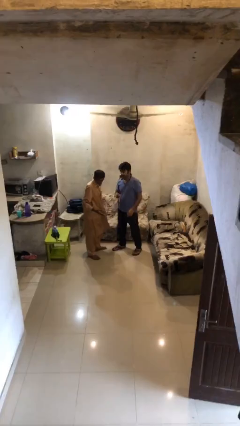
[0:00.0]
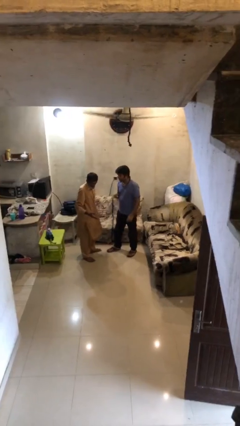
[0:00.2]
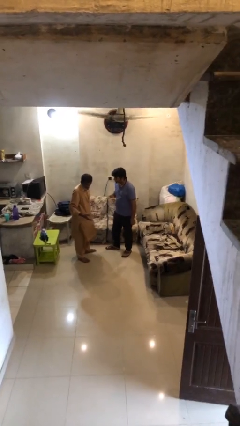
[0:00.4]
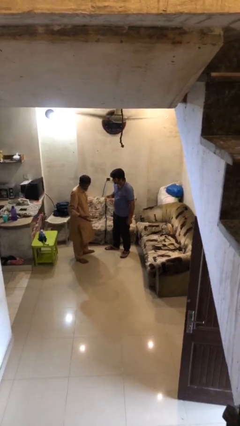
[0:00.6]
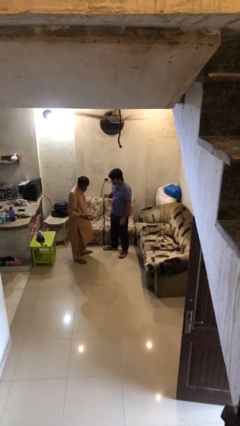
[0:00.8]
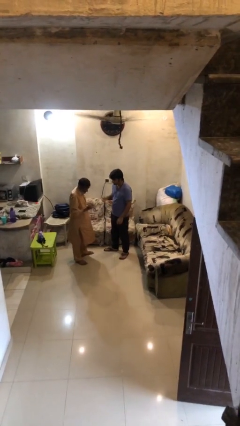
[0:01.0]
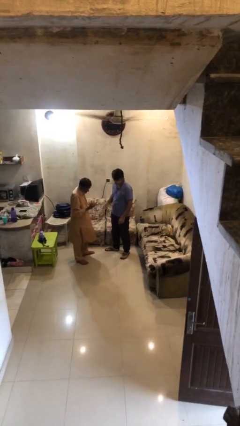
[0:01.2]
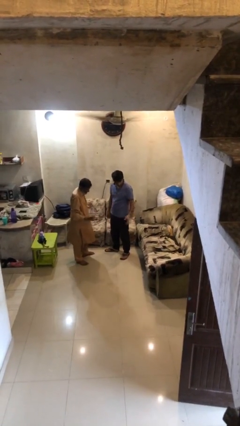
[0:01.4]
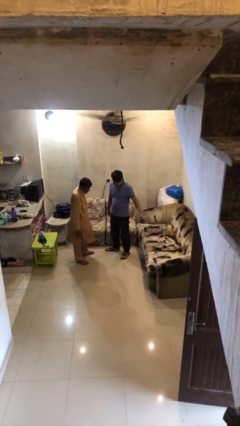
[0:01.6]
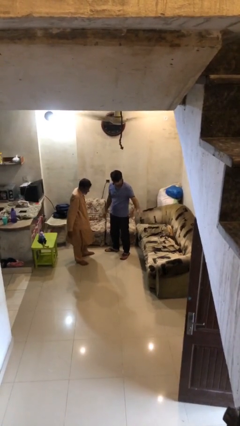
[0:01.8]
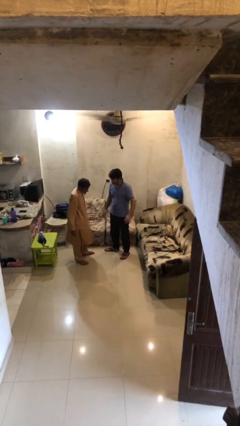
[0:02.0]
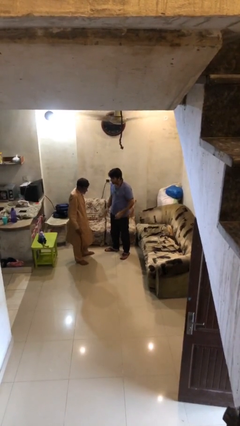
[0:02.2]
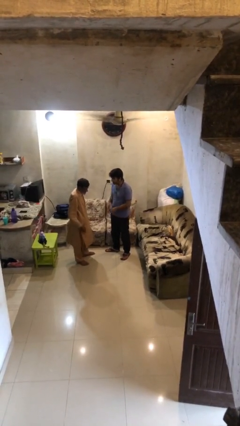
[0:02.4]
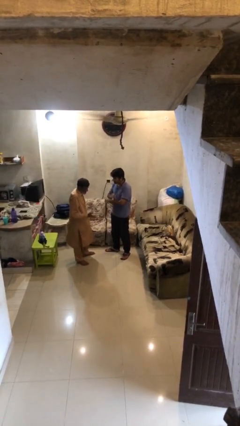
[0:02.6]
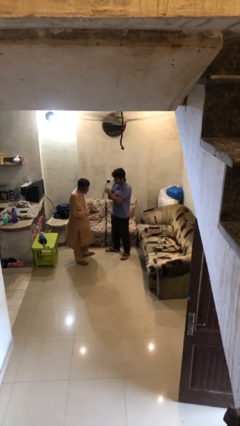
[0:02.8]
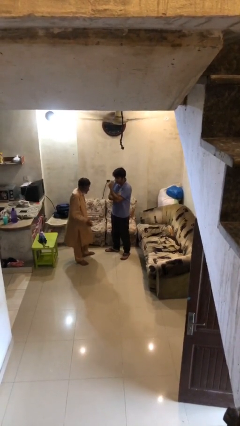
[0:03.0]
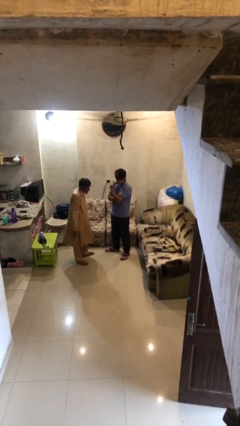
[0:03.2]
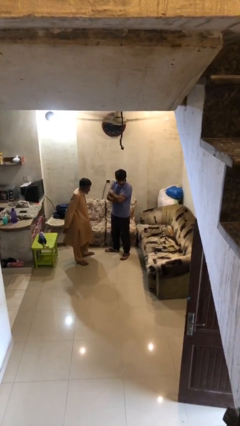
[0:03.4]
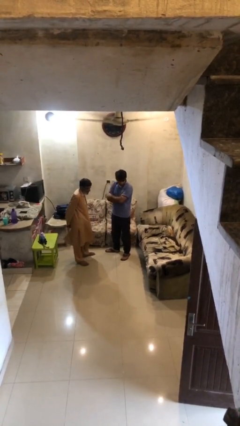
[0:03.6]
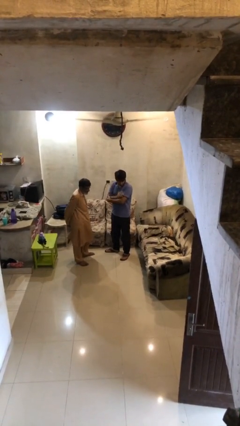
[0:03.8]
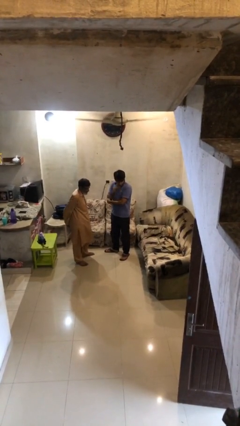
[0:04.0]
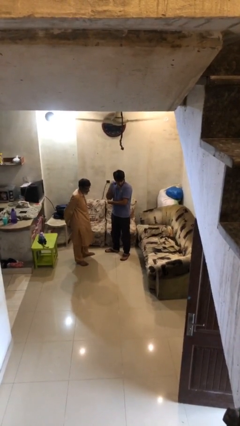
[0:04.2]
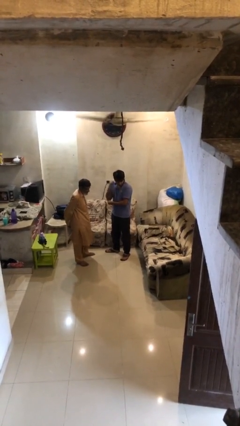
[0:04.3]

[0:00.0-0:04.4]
person talks to person

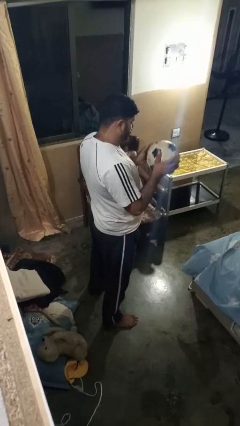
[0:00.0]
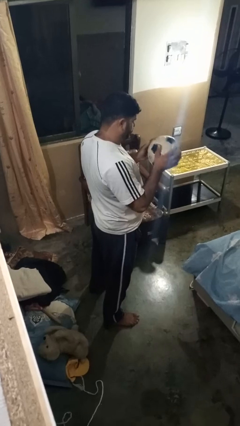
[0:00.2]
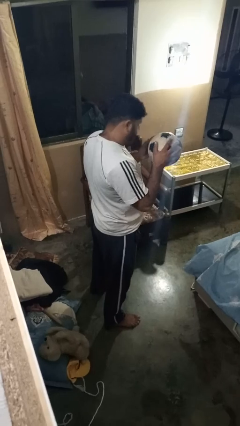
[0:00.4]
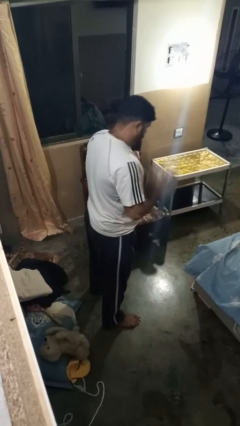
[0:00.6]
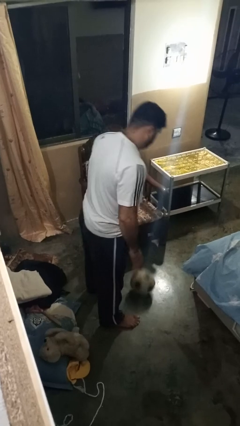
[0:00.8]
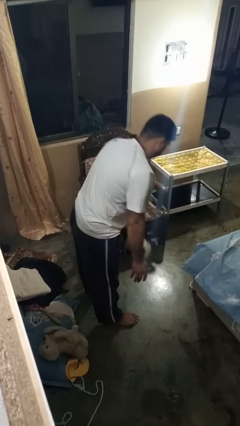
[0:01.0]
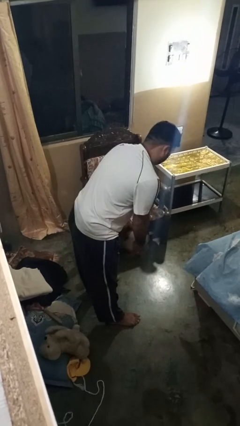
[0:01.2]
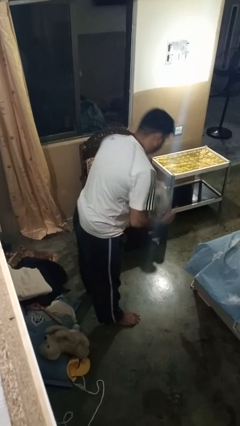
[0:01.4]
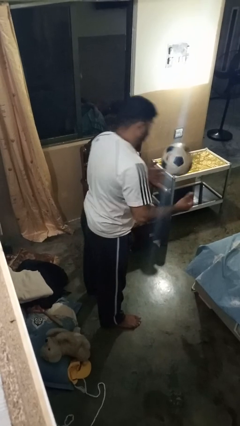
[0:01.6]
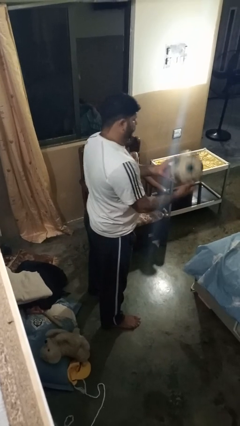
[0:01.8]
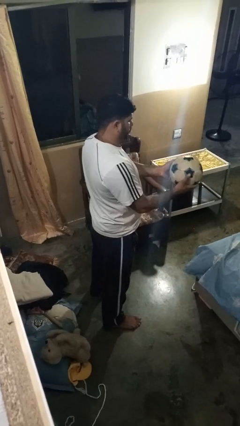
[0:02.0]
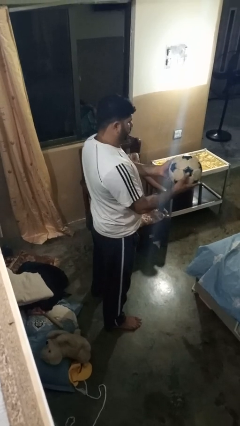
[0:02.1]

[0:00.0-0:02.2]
person bounces ball on floor

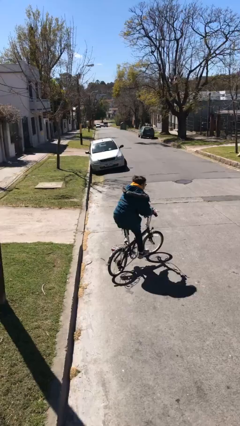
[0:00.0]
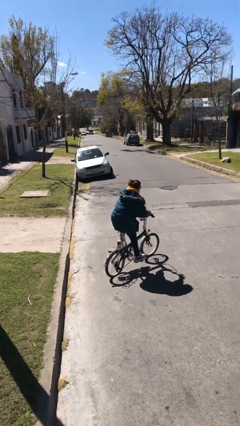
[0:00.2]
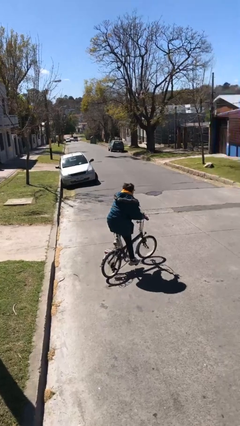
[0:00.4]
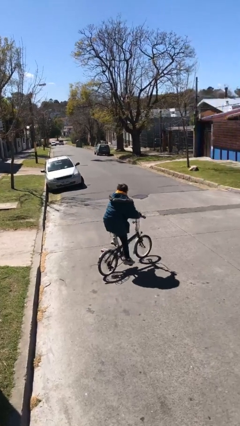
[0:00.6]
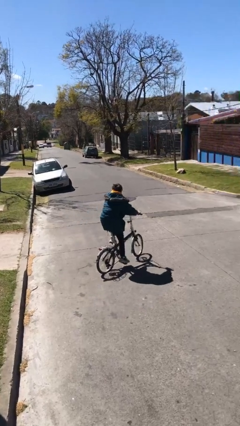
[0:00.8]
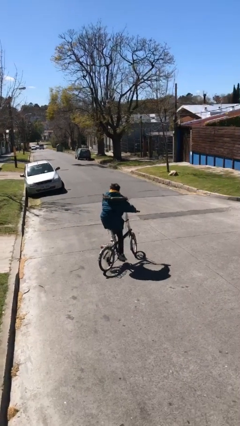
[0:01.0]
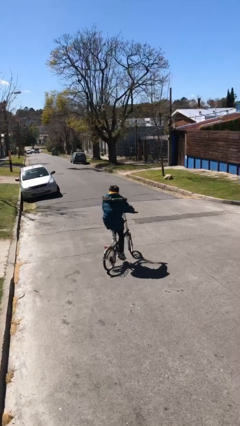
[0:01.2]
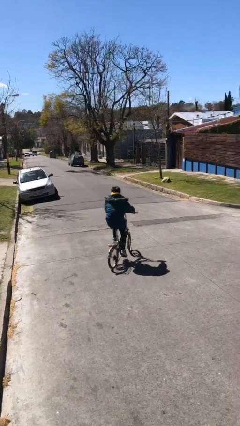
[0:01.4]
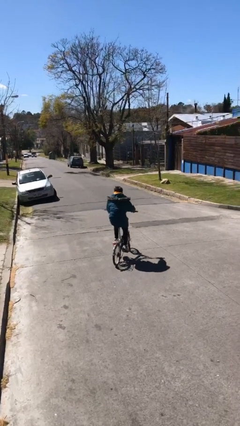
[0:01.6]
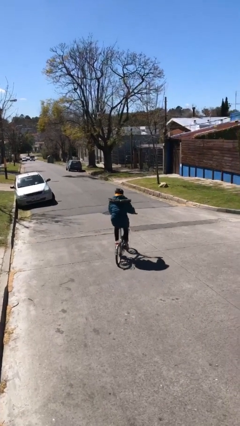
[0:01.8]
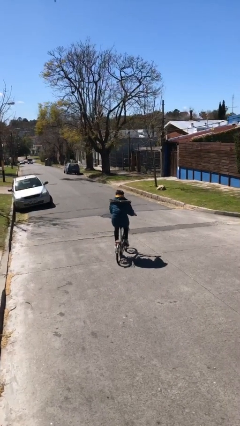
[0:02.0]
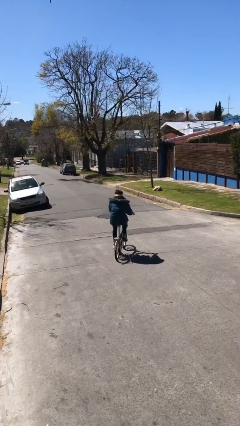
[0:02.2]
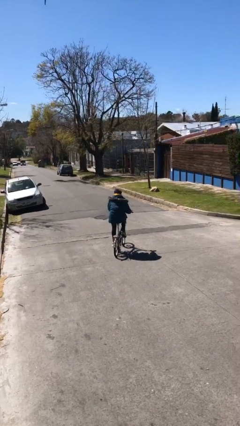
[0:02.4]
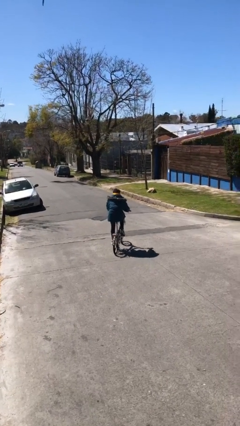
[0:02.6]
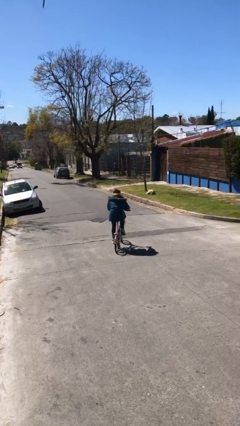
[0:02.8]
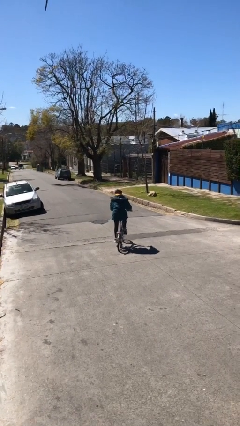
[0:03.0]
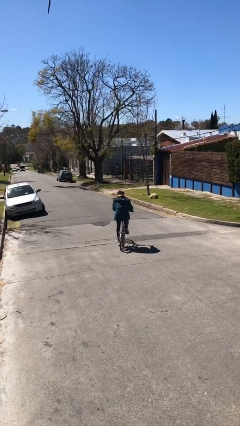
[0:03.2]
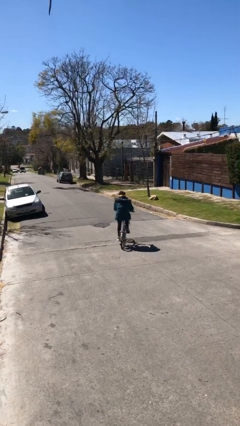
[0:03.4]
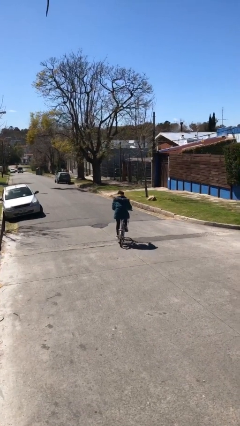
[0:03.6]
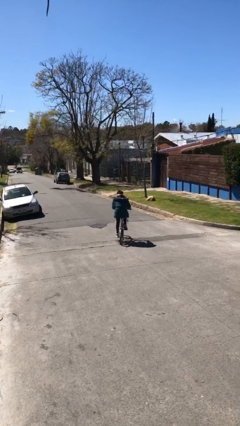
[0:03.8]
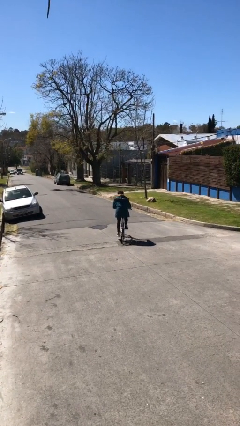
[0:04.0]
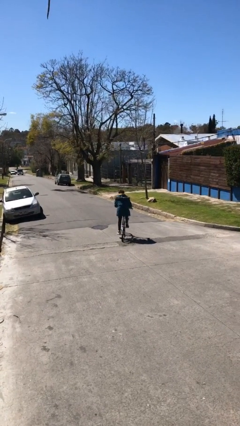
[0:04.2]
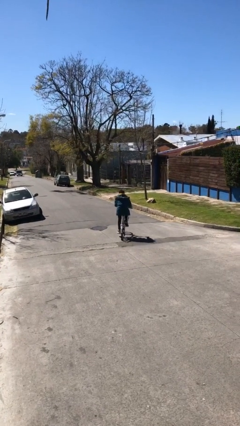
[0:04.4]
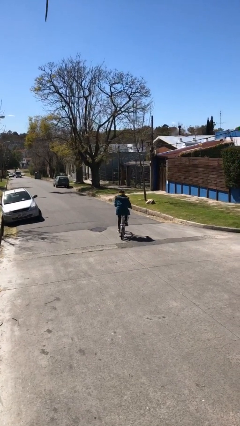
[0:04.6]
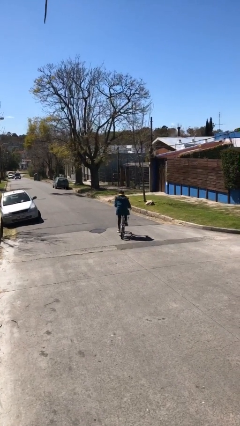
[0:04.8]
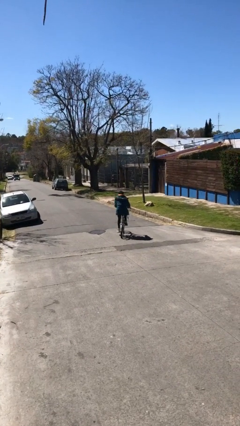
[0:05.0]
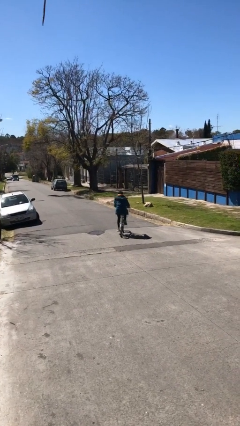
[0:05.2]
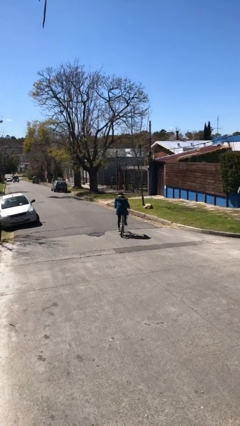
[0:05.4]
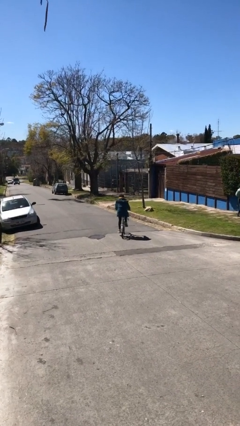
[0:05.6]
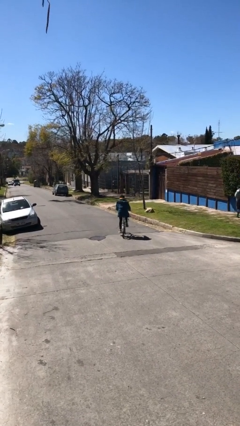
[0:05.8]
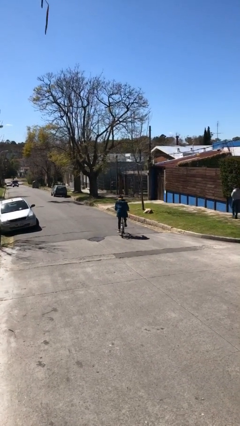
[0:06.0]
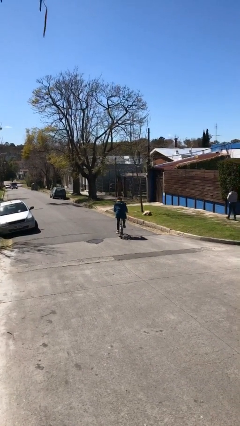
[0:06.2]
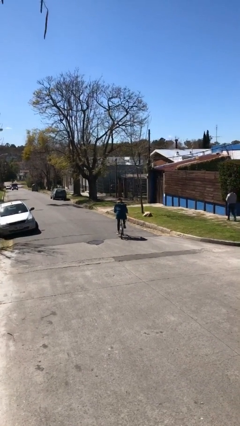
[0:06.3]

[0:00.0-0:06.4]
person rides bicycle

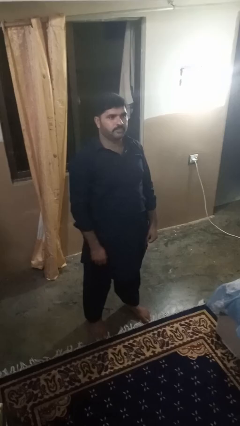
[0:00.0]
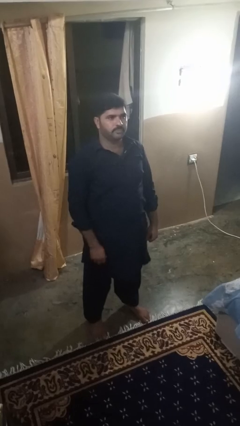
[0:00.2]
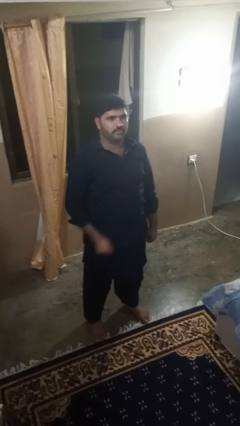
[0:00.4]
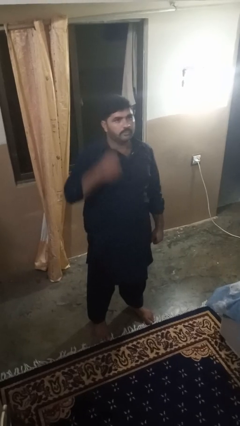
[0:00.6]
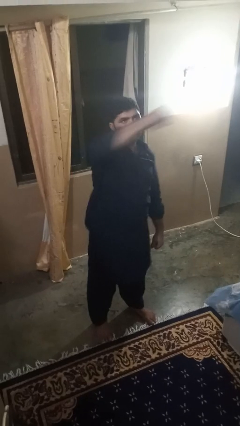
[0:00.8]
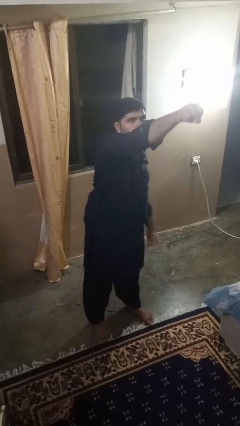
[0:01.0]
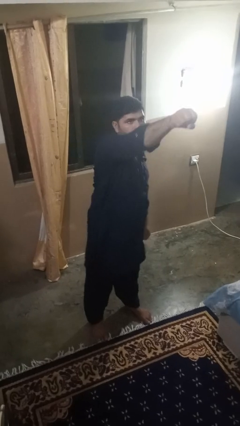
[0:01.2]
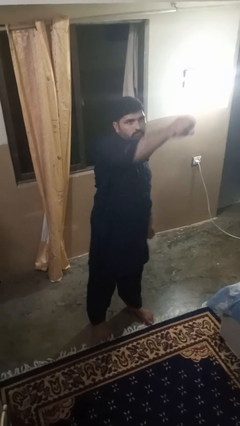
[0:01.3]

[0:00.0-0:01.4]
person punches

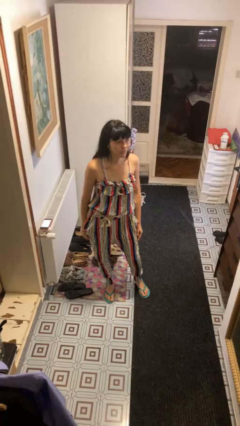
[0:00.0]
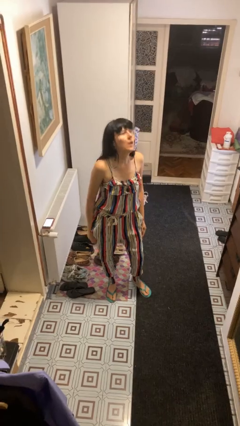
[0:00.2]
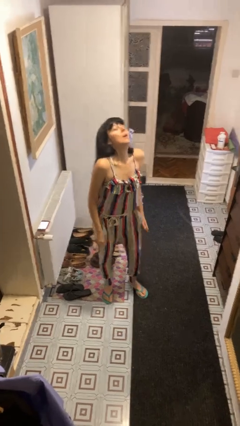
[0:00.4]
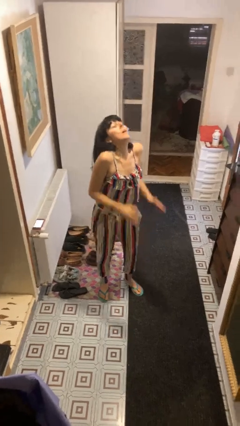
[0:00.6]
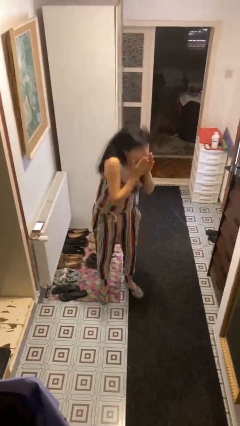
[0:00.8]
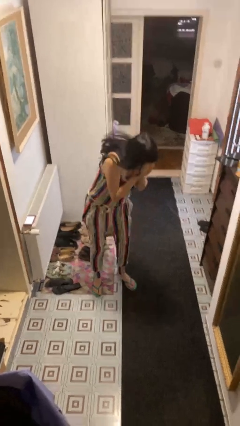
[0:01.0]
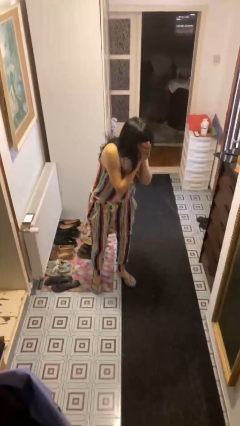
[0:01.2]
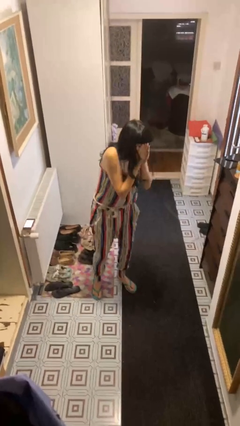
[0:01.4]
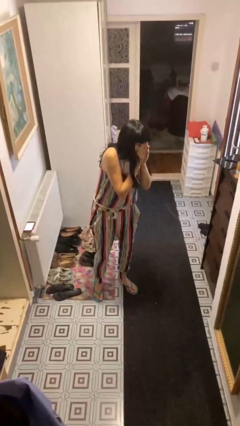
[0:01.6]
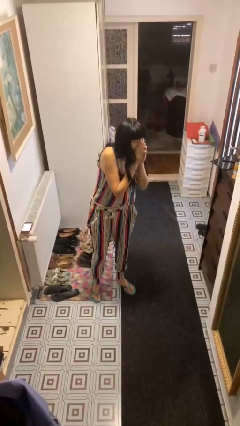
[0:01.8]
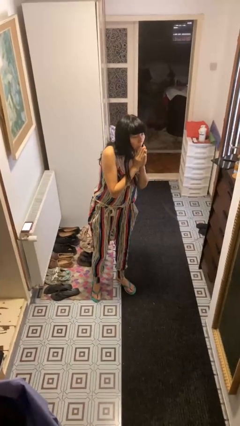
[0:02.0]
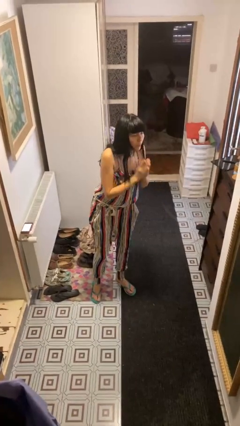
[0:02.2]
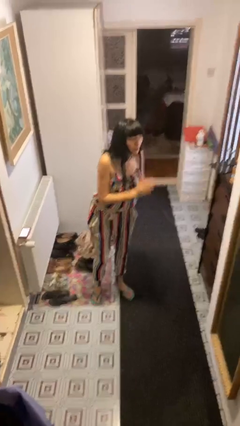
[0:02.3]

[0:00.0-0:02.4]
person sneezes into hand

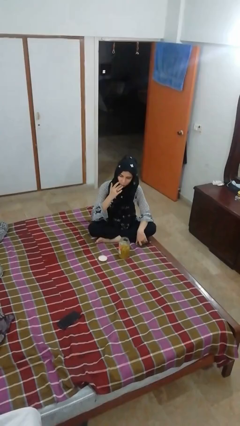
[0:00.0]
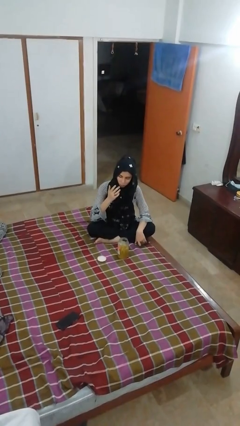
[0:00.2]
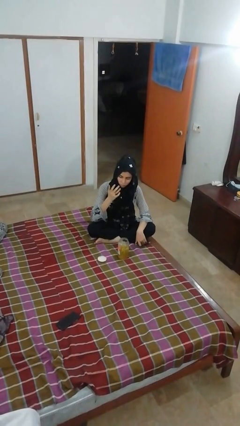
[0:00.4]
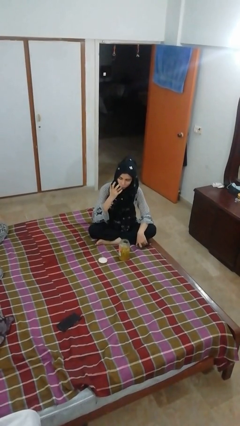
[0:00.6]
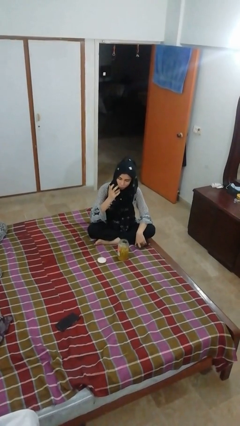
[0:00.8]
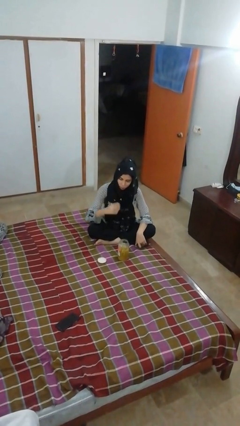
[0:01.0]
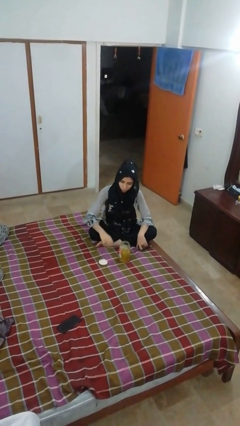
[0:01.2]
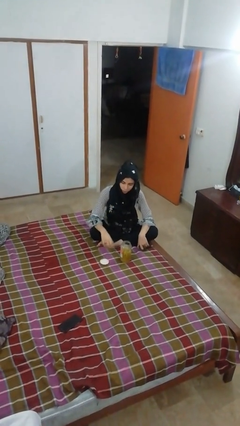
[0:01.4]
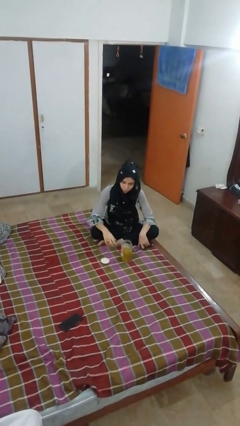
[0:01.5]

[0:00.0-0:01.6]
person licks fingers
